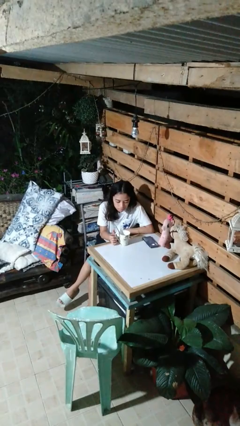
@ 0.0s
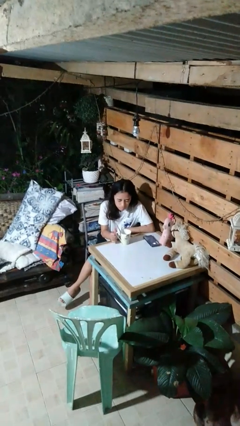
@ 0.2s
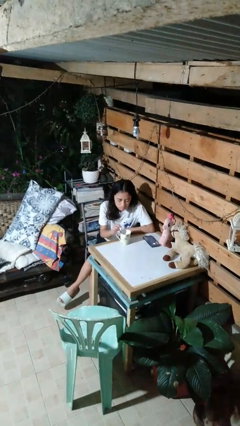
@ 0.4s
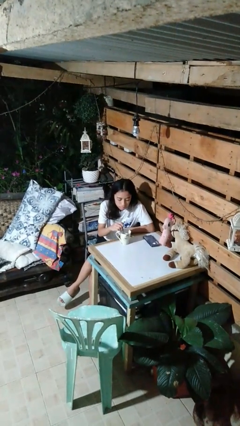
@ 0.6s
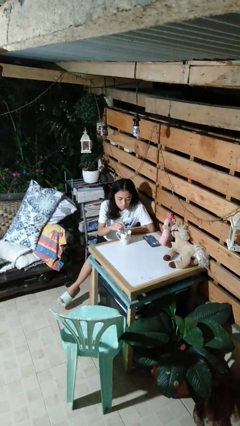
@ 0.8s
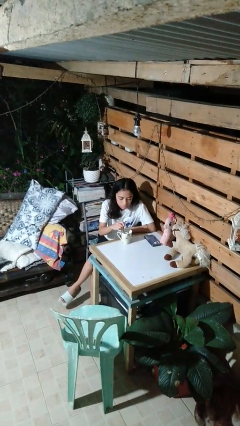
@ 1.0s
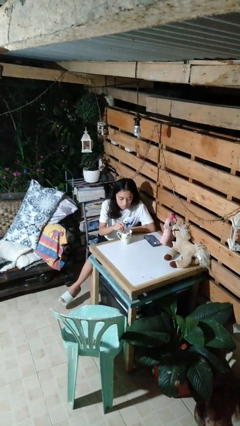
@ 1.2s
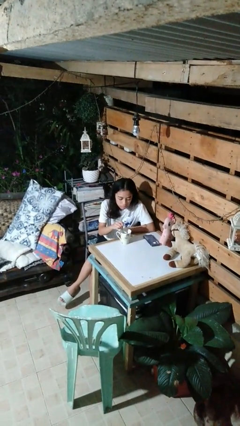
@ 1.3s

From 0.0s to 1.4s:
person stirs mug

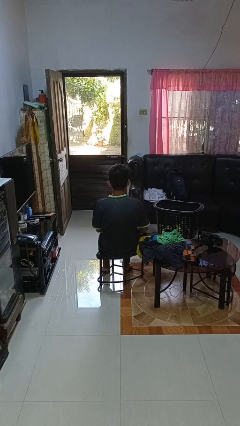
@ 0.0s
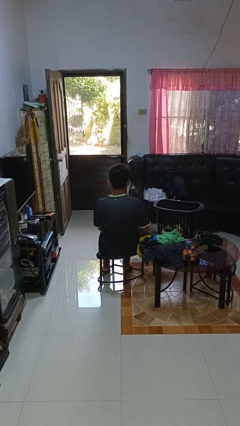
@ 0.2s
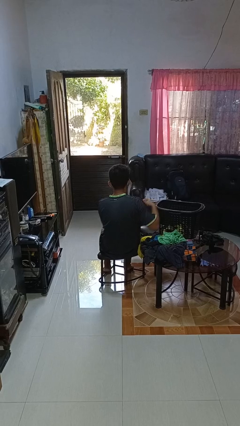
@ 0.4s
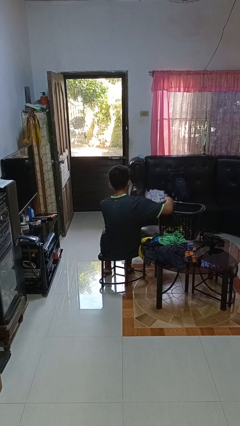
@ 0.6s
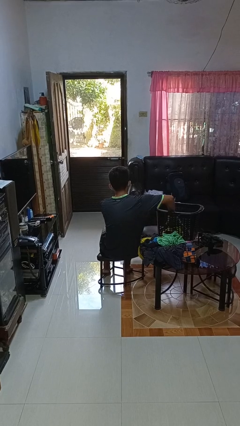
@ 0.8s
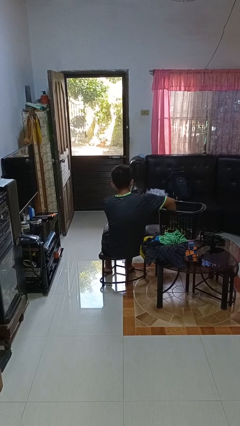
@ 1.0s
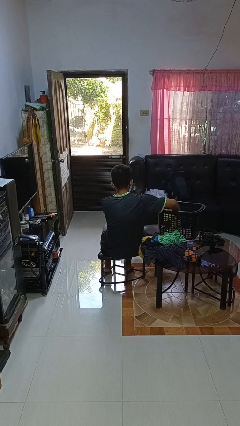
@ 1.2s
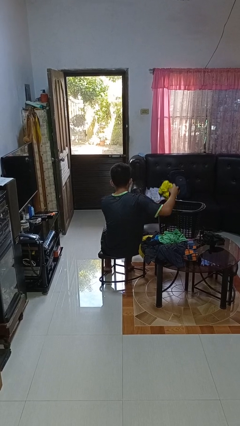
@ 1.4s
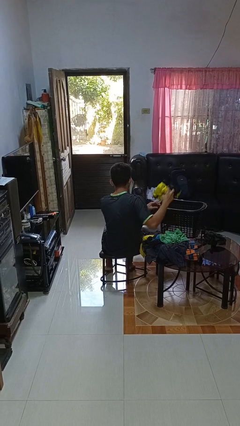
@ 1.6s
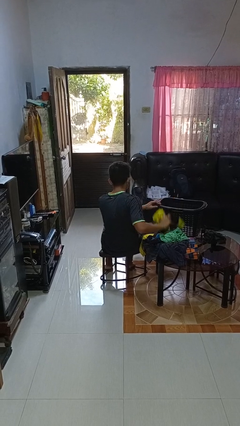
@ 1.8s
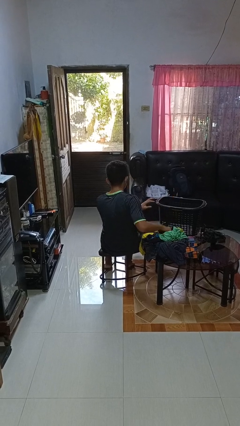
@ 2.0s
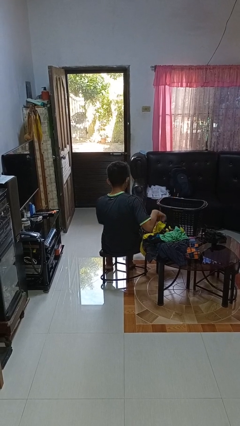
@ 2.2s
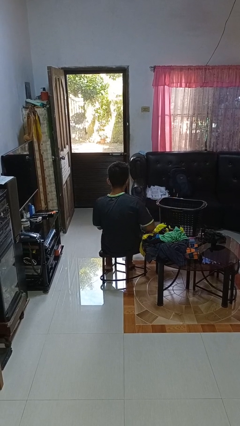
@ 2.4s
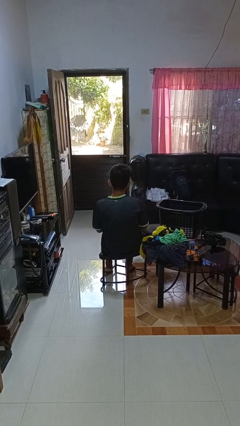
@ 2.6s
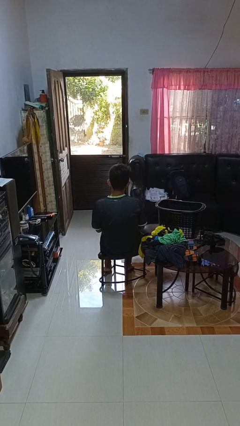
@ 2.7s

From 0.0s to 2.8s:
person takes object from basket

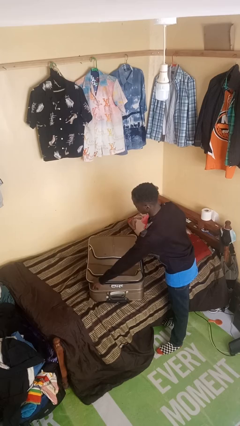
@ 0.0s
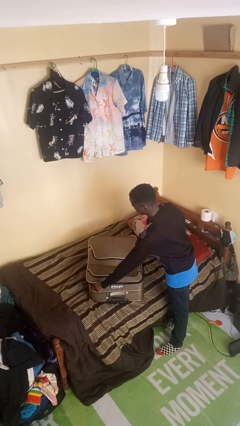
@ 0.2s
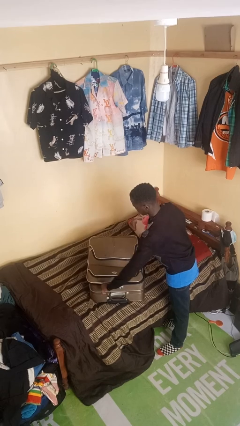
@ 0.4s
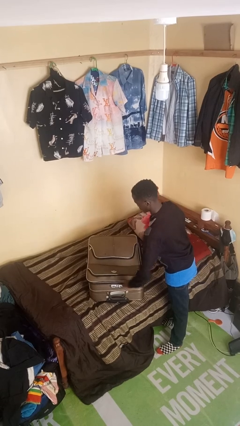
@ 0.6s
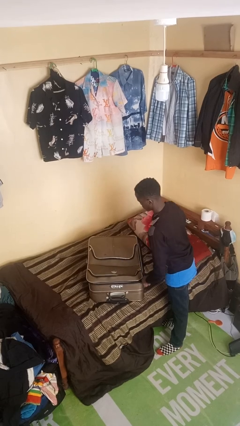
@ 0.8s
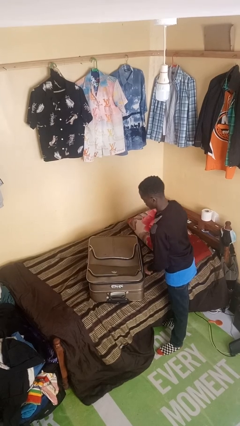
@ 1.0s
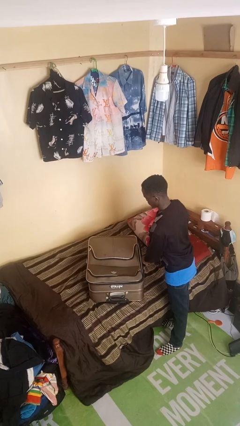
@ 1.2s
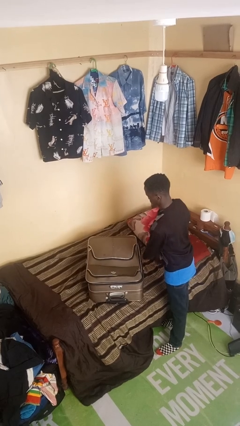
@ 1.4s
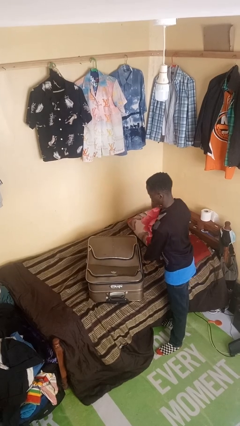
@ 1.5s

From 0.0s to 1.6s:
person closes suitcase

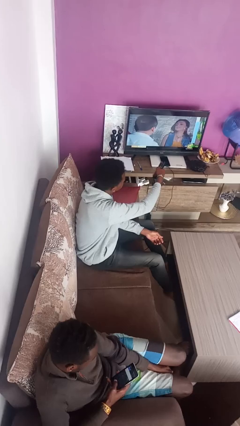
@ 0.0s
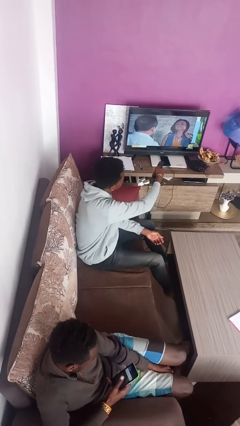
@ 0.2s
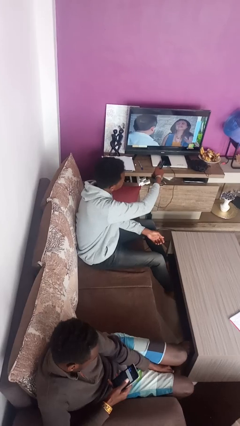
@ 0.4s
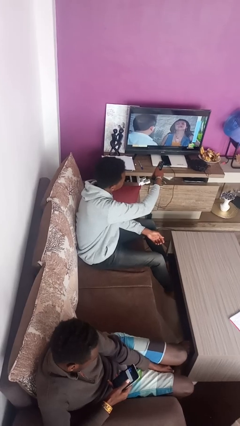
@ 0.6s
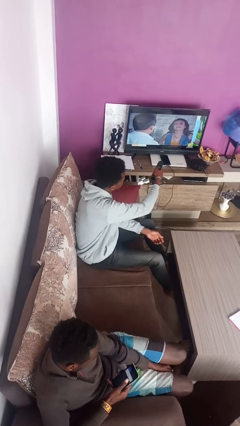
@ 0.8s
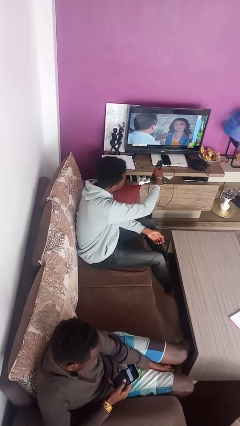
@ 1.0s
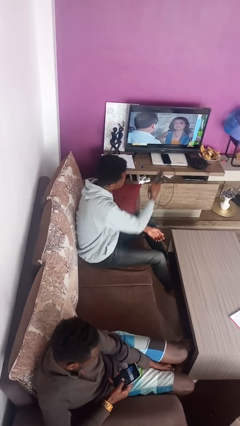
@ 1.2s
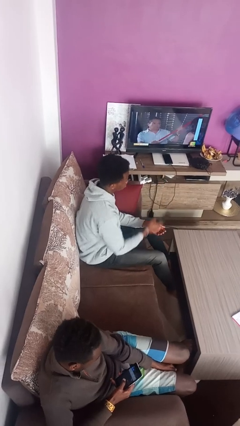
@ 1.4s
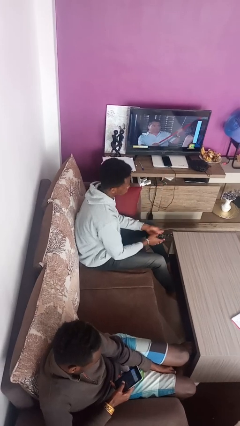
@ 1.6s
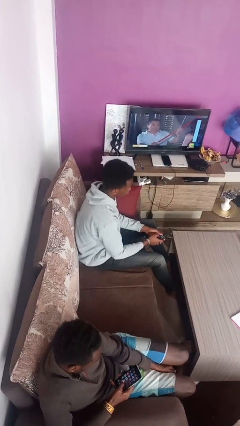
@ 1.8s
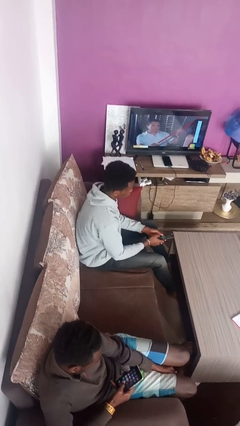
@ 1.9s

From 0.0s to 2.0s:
person uses television remote

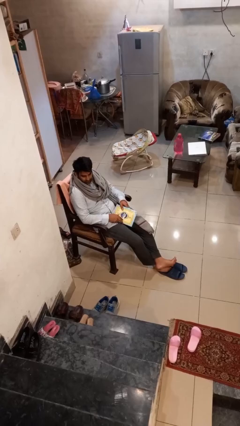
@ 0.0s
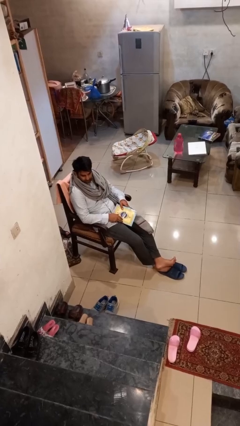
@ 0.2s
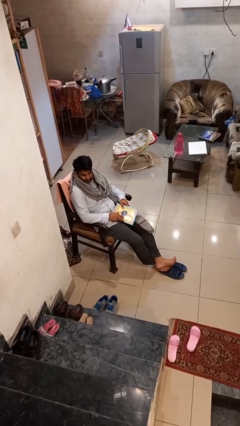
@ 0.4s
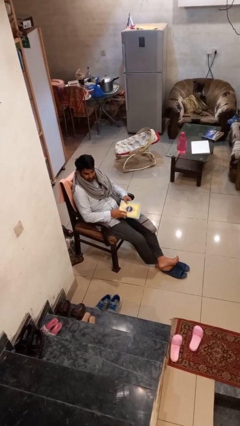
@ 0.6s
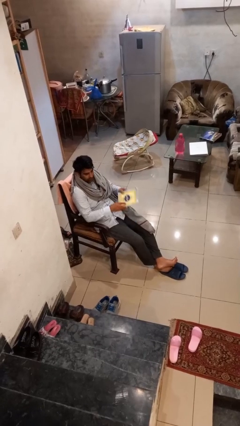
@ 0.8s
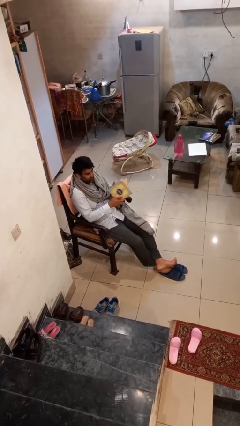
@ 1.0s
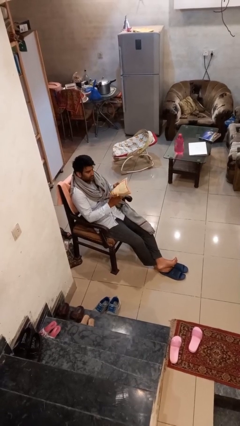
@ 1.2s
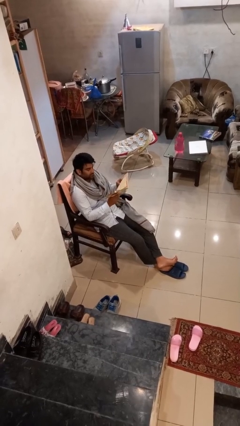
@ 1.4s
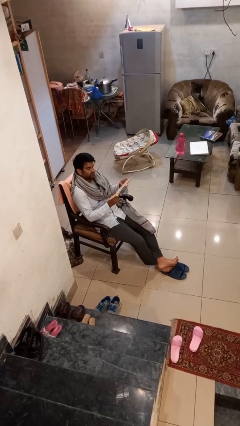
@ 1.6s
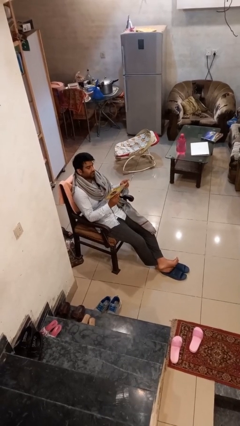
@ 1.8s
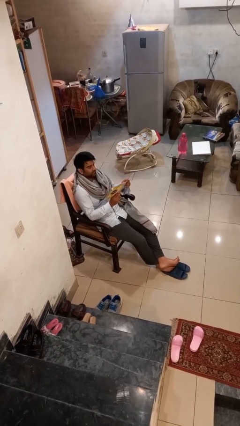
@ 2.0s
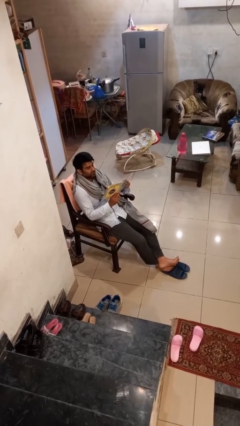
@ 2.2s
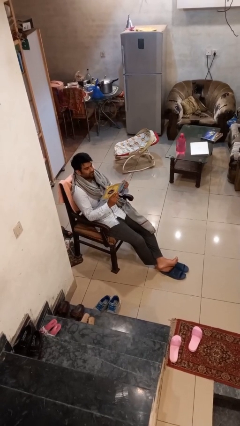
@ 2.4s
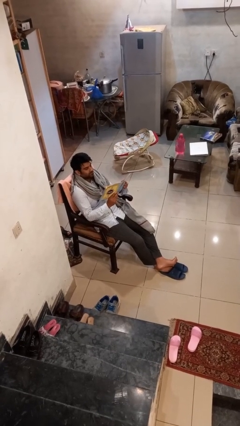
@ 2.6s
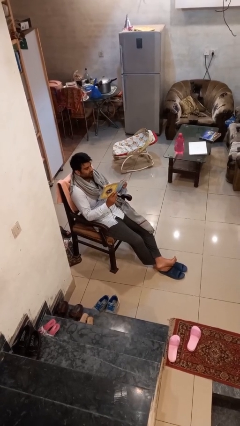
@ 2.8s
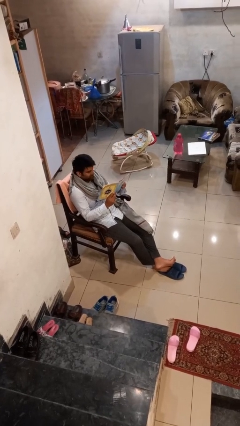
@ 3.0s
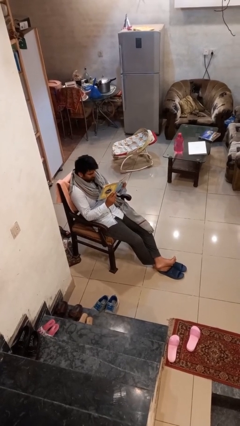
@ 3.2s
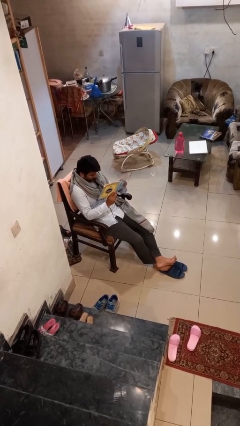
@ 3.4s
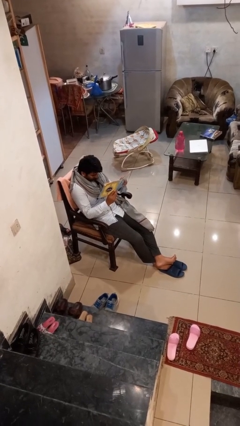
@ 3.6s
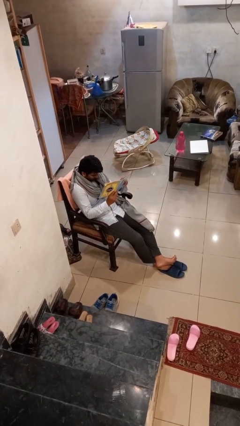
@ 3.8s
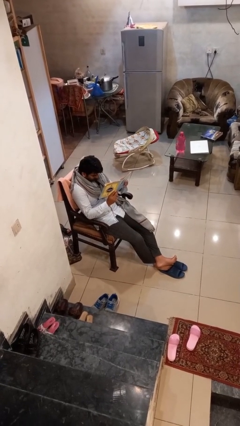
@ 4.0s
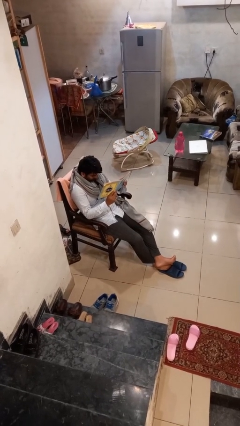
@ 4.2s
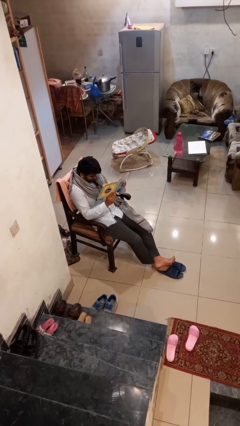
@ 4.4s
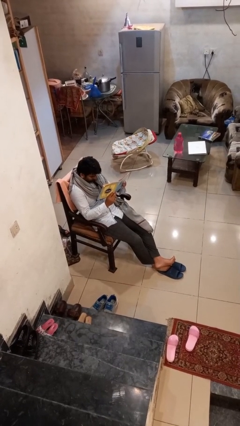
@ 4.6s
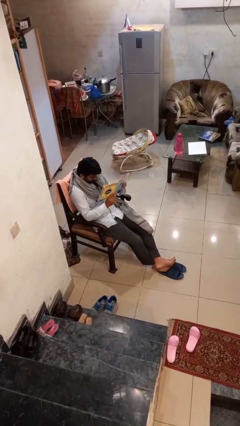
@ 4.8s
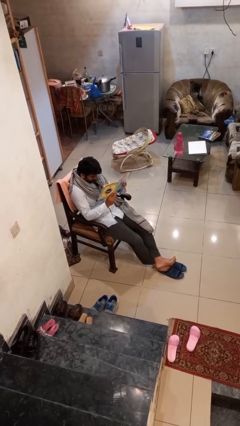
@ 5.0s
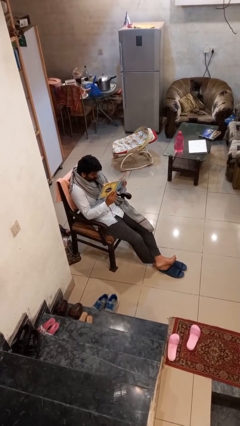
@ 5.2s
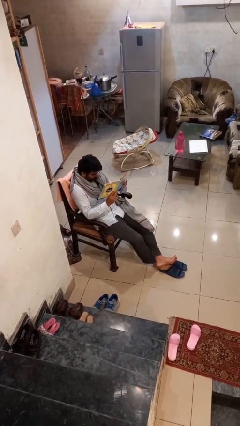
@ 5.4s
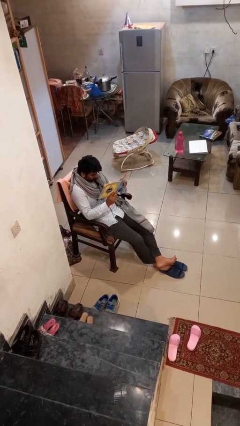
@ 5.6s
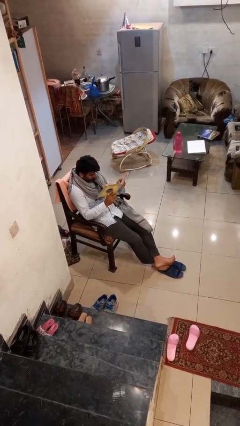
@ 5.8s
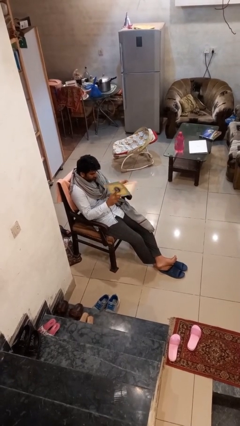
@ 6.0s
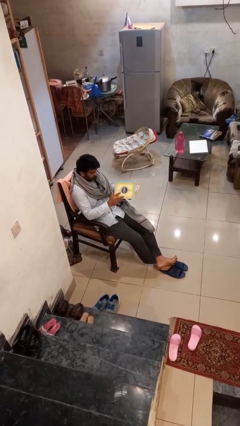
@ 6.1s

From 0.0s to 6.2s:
person reads document

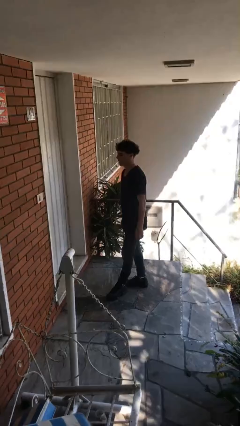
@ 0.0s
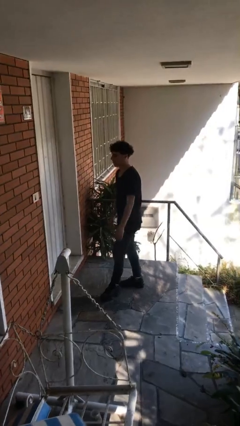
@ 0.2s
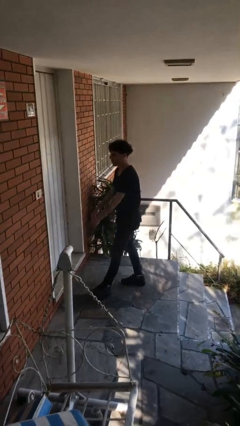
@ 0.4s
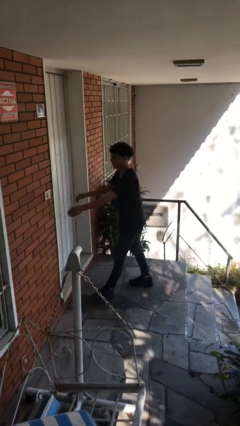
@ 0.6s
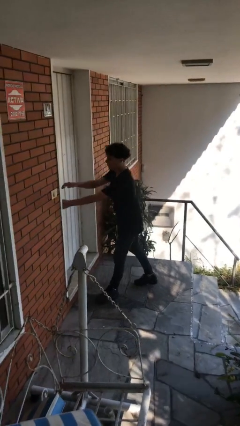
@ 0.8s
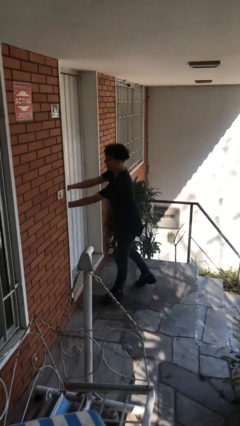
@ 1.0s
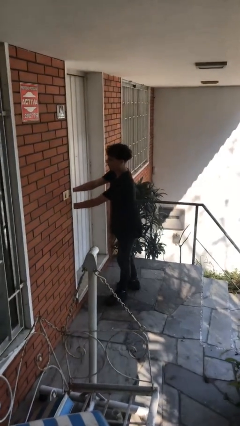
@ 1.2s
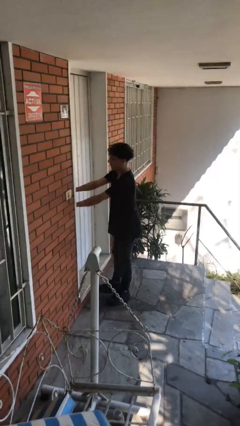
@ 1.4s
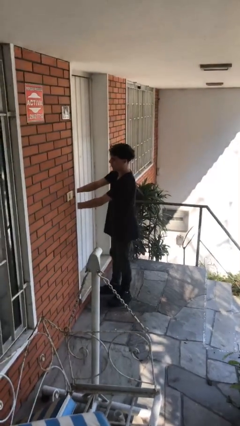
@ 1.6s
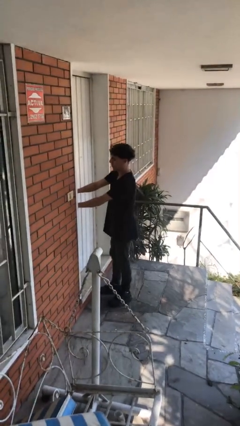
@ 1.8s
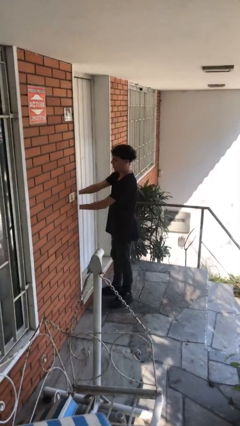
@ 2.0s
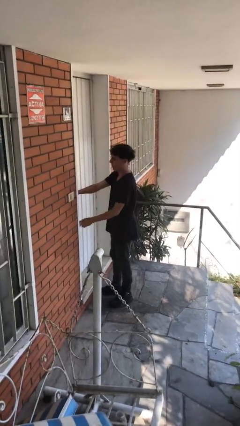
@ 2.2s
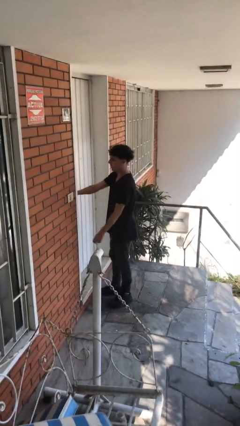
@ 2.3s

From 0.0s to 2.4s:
person unlocks door with keys

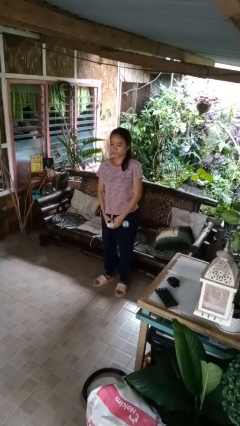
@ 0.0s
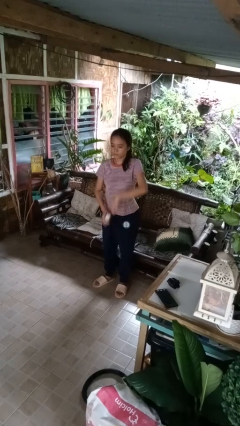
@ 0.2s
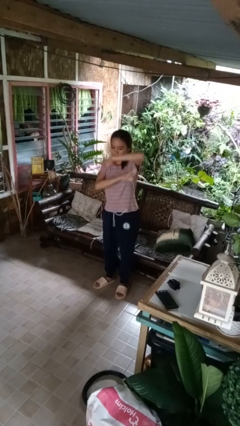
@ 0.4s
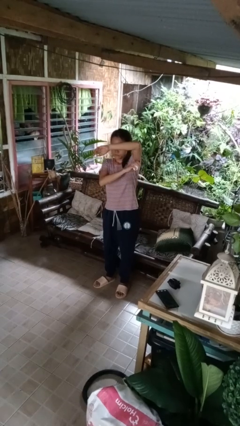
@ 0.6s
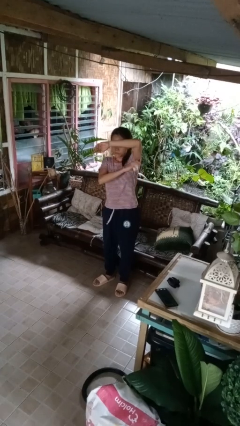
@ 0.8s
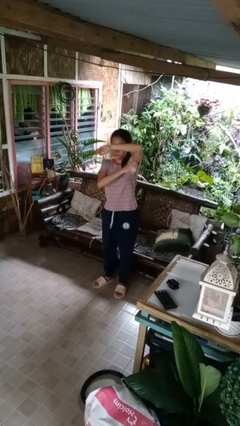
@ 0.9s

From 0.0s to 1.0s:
person applies deodorant
